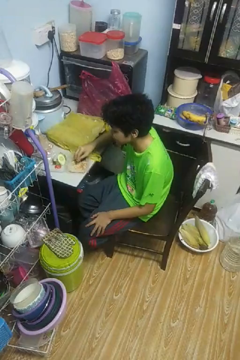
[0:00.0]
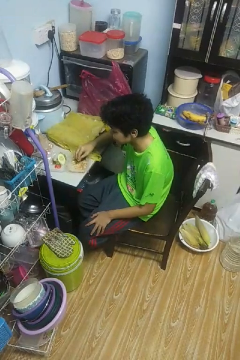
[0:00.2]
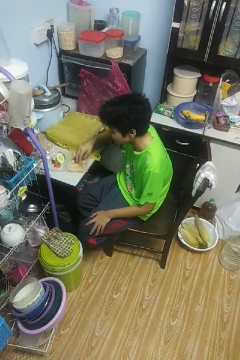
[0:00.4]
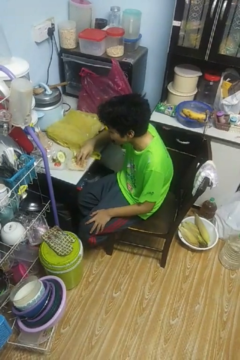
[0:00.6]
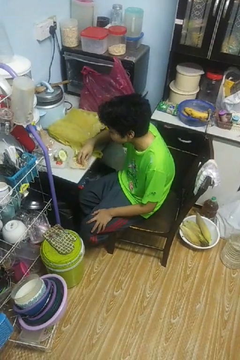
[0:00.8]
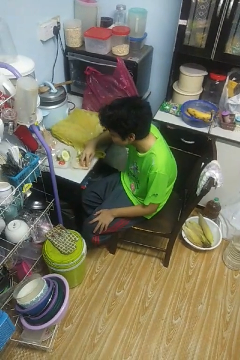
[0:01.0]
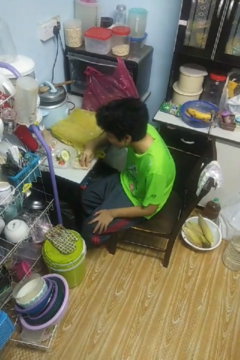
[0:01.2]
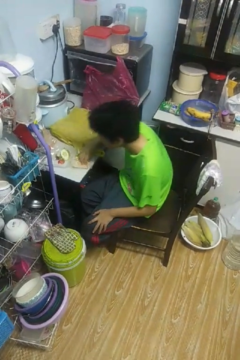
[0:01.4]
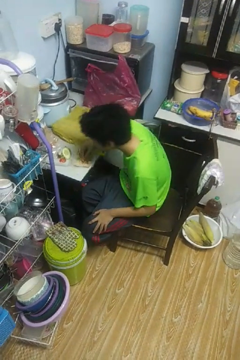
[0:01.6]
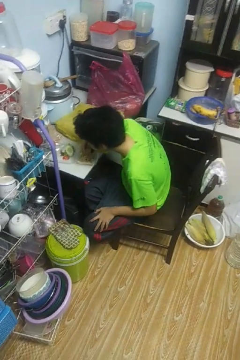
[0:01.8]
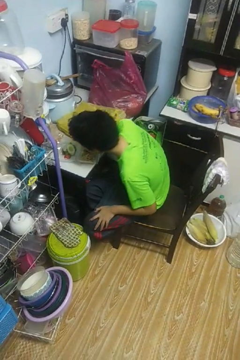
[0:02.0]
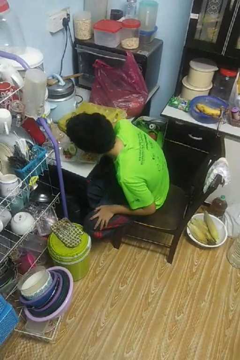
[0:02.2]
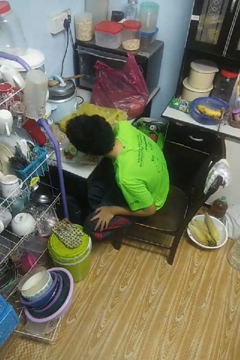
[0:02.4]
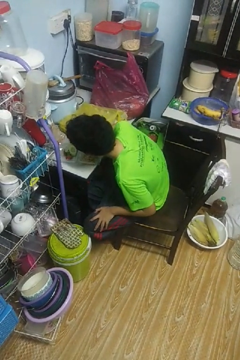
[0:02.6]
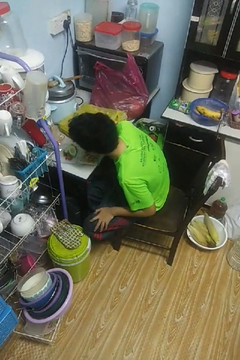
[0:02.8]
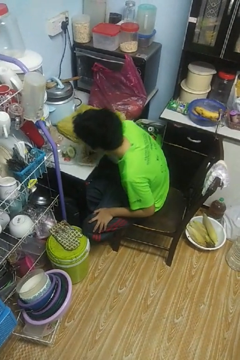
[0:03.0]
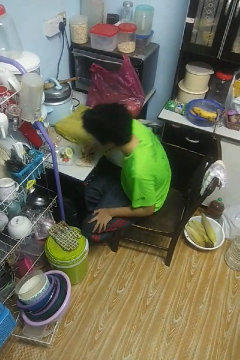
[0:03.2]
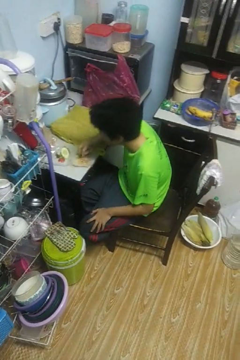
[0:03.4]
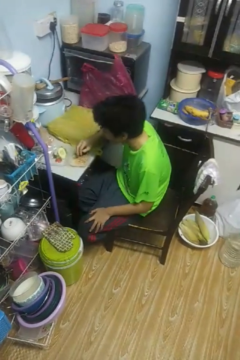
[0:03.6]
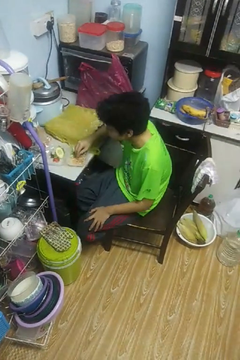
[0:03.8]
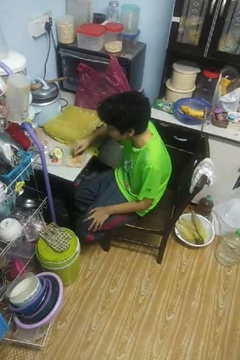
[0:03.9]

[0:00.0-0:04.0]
person eats with hands

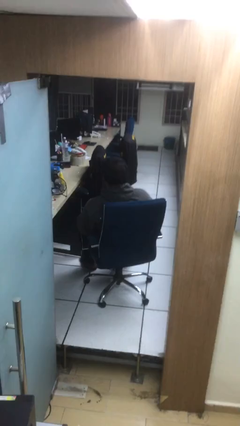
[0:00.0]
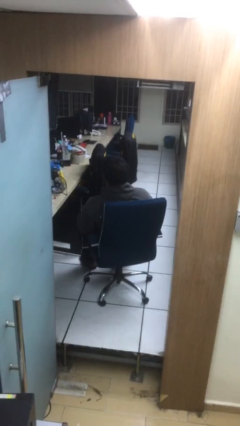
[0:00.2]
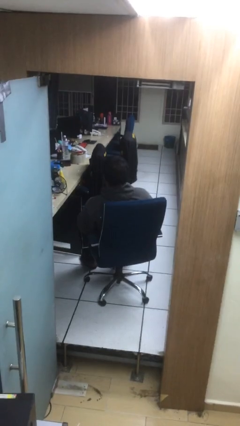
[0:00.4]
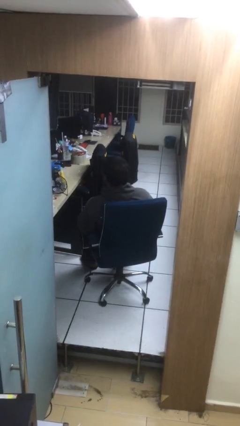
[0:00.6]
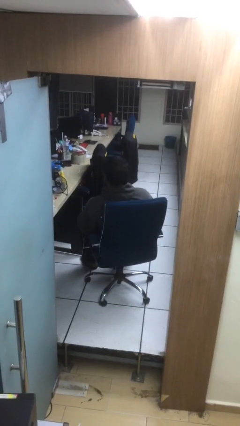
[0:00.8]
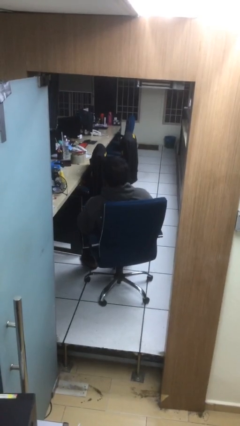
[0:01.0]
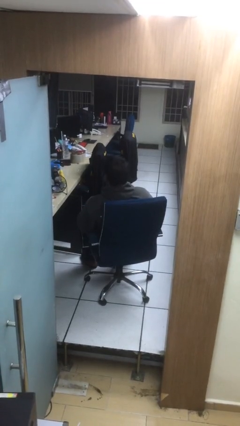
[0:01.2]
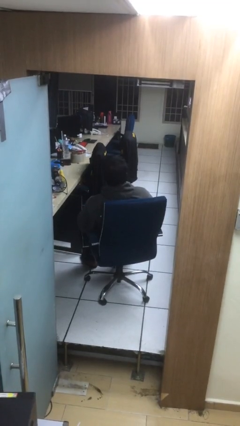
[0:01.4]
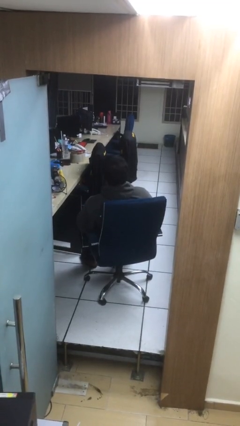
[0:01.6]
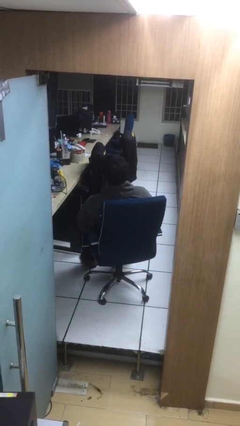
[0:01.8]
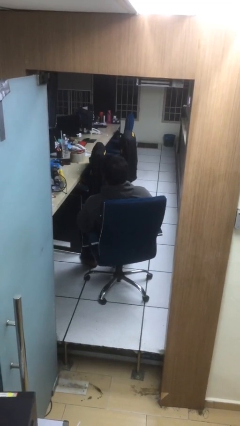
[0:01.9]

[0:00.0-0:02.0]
person shakes head

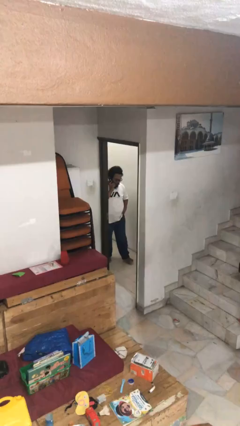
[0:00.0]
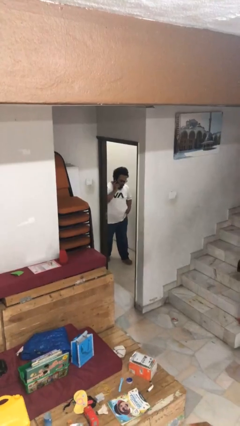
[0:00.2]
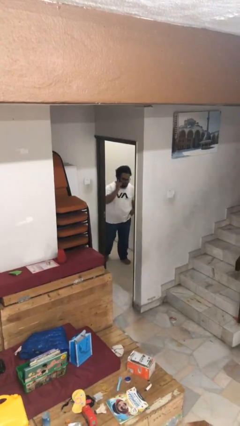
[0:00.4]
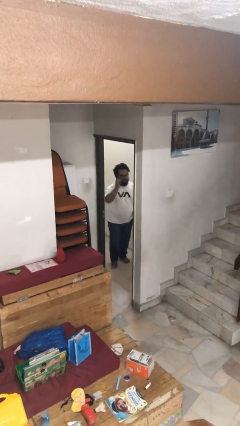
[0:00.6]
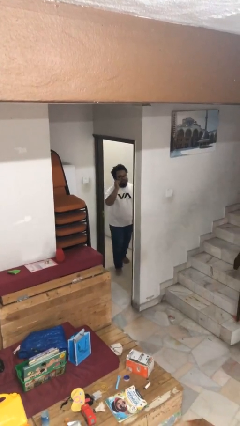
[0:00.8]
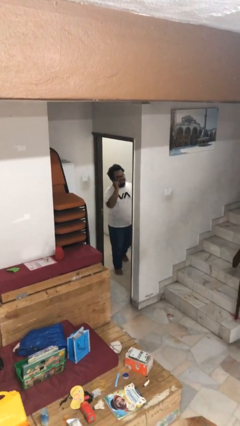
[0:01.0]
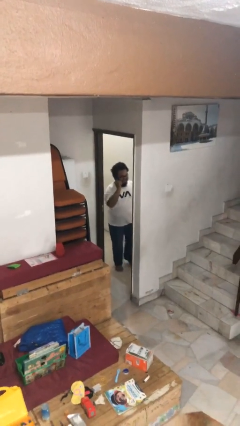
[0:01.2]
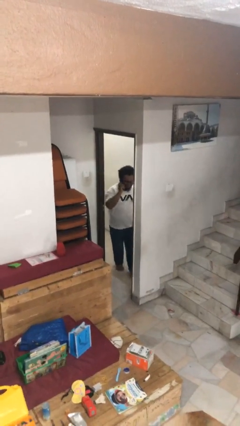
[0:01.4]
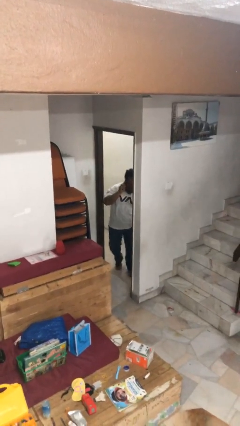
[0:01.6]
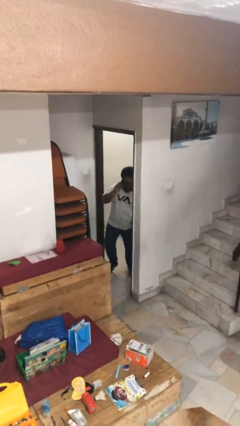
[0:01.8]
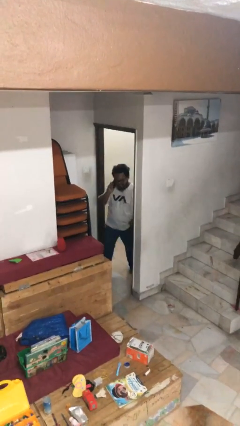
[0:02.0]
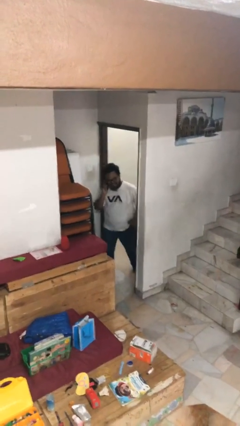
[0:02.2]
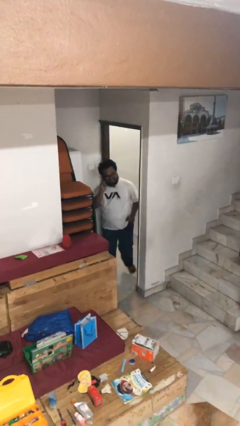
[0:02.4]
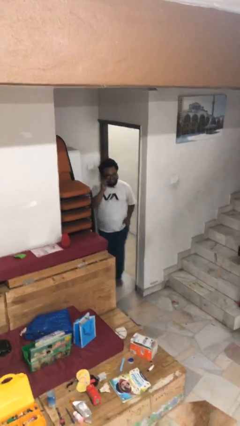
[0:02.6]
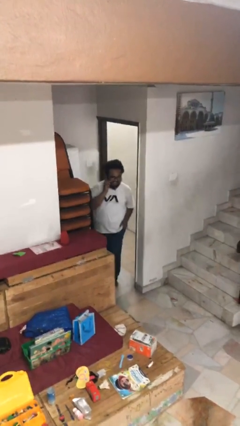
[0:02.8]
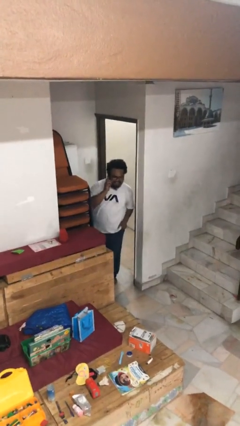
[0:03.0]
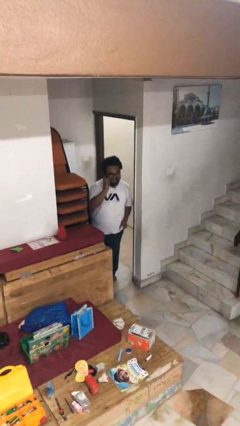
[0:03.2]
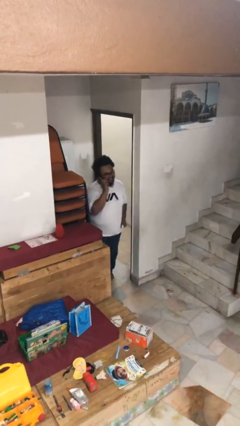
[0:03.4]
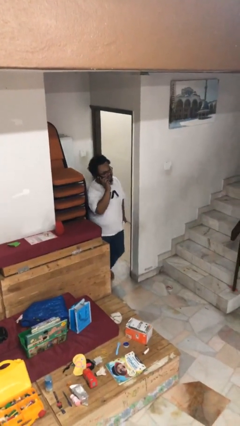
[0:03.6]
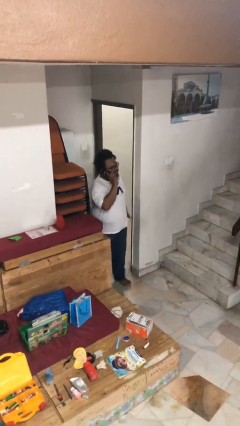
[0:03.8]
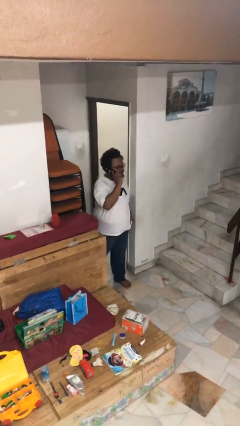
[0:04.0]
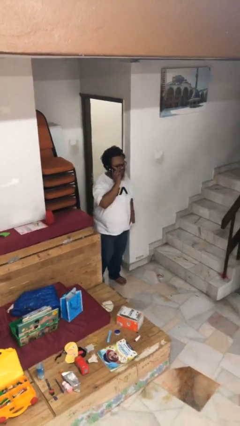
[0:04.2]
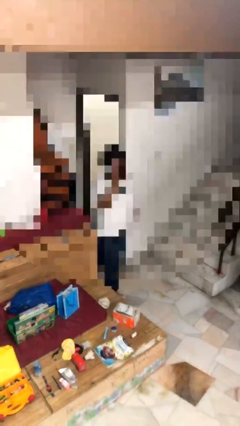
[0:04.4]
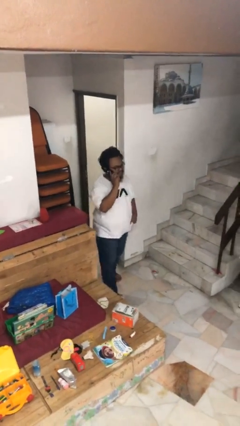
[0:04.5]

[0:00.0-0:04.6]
person enters scene through structure

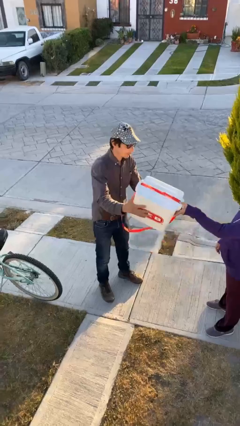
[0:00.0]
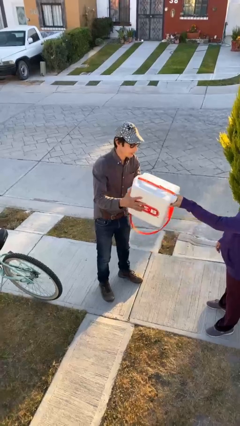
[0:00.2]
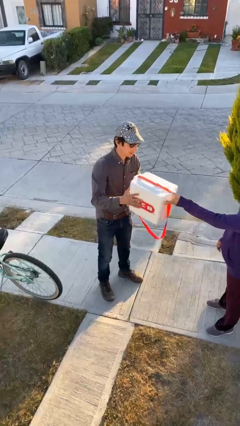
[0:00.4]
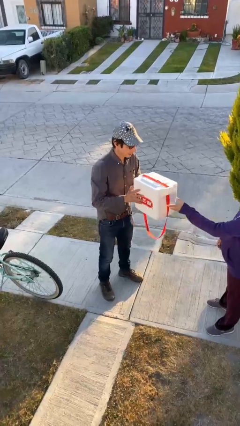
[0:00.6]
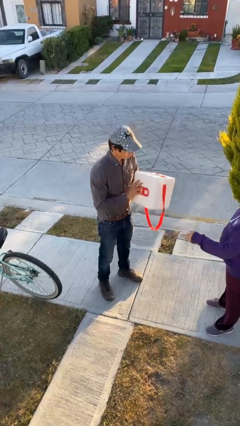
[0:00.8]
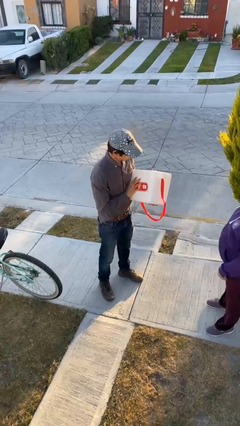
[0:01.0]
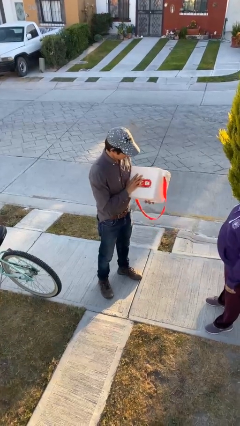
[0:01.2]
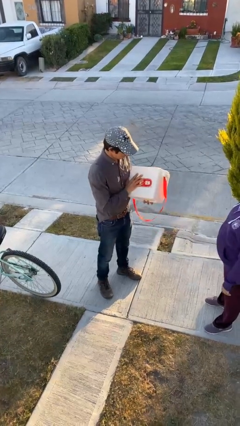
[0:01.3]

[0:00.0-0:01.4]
person transfers object to person

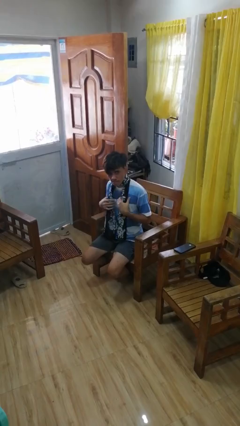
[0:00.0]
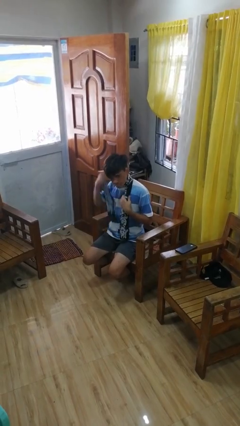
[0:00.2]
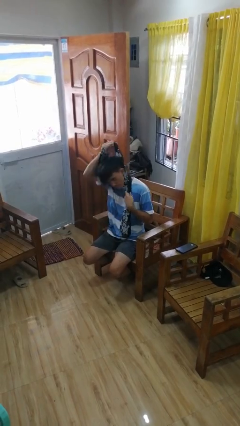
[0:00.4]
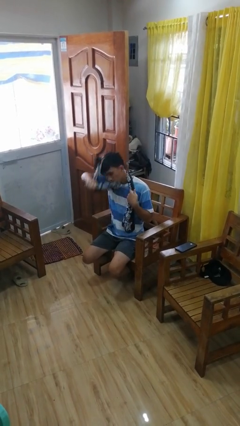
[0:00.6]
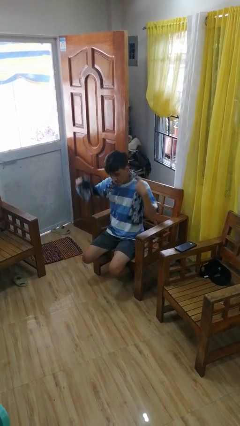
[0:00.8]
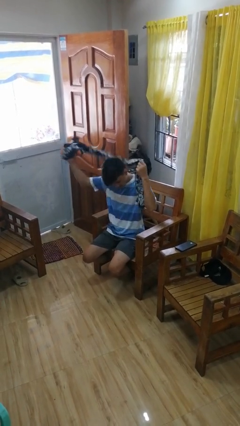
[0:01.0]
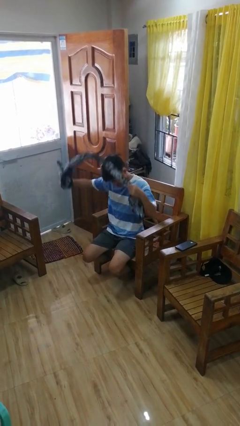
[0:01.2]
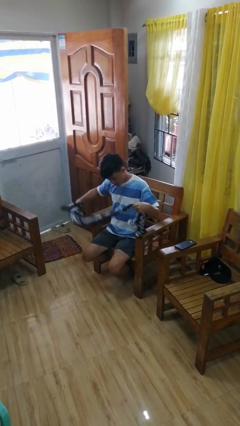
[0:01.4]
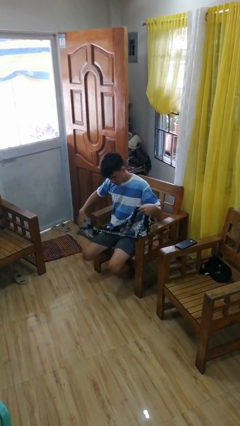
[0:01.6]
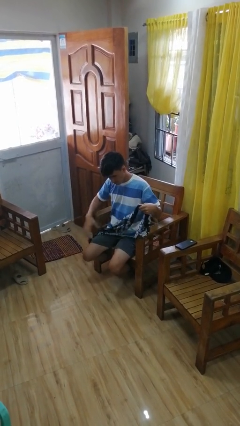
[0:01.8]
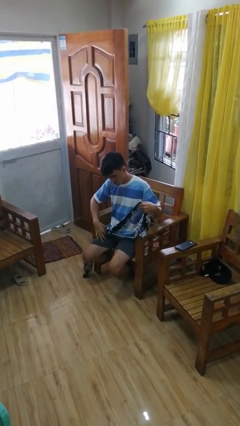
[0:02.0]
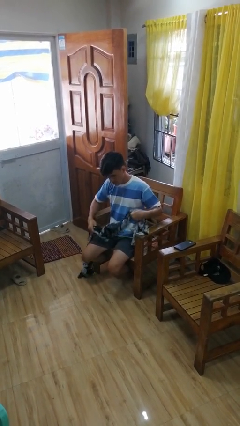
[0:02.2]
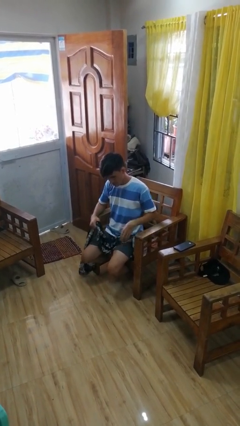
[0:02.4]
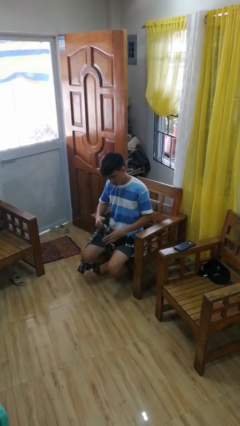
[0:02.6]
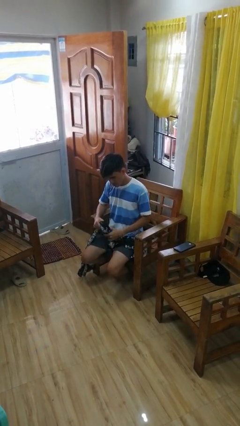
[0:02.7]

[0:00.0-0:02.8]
person takes off scarf

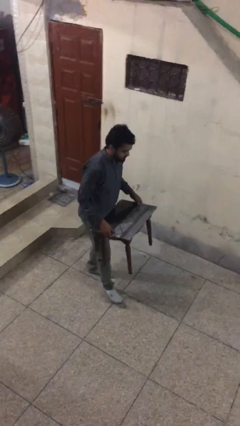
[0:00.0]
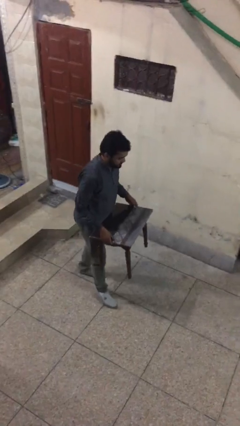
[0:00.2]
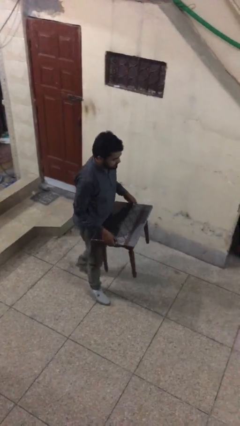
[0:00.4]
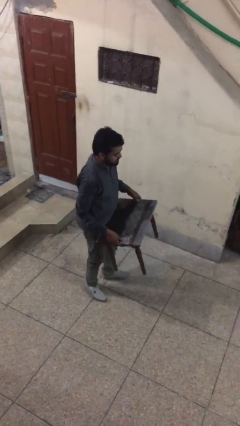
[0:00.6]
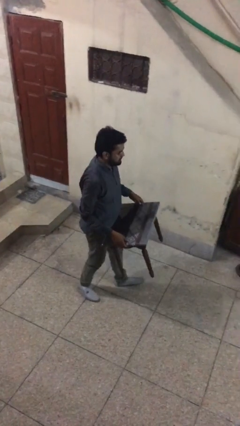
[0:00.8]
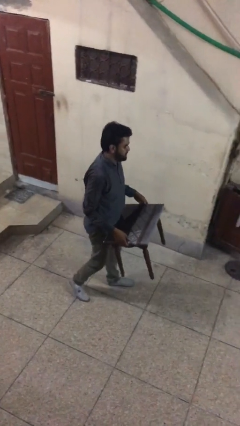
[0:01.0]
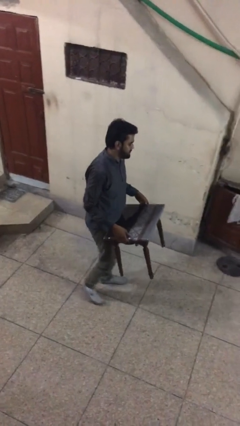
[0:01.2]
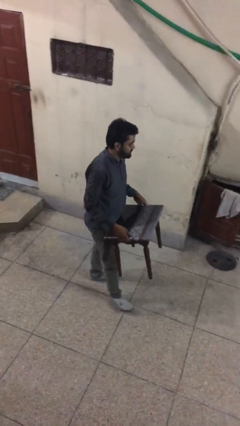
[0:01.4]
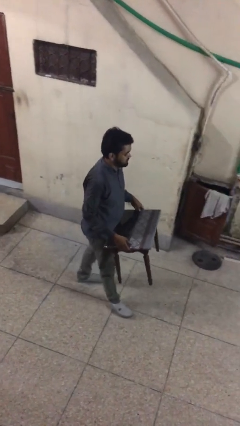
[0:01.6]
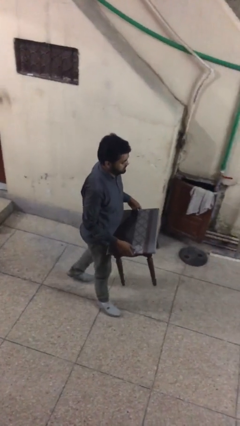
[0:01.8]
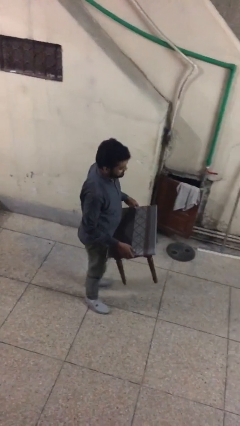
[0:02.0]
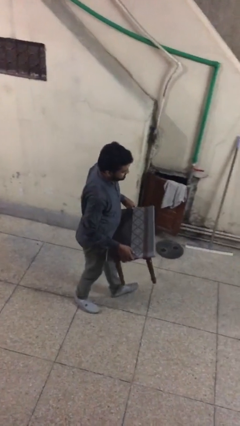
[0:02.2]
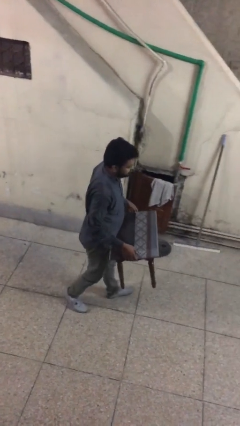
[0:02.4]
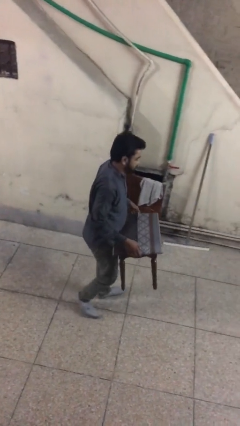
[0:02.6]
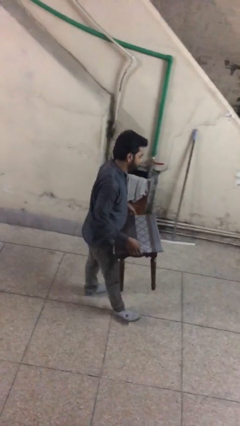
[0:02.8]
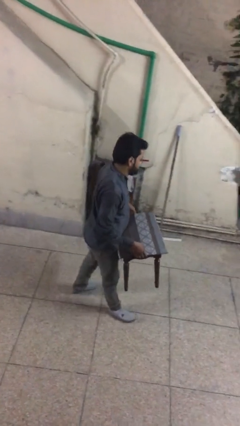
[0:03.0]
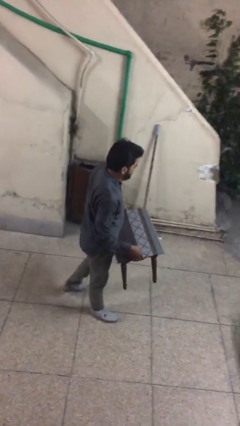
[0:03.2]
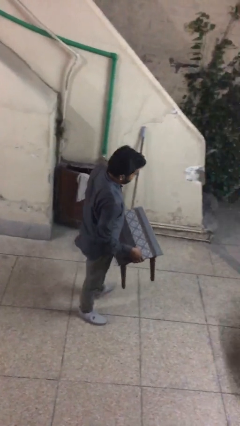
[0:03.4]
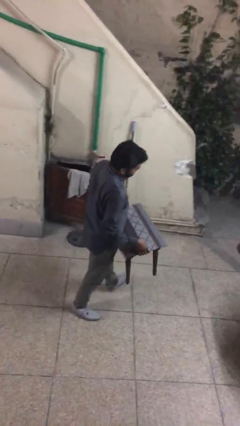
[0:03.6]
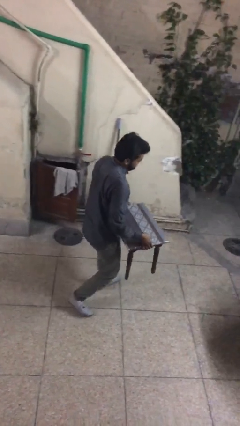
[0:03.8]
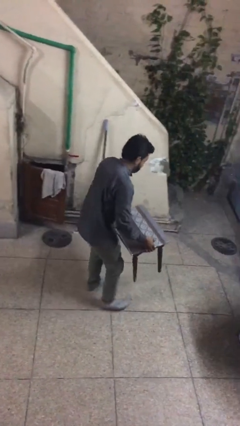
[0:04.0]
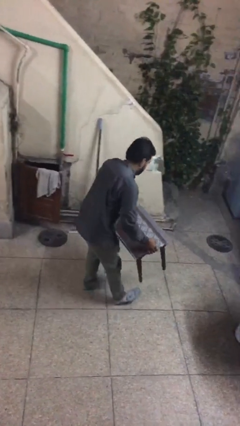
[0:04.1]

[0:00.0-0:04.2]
person carries heavy object
